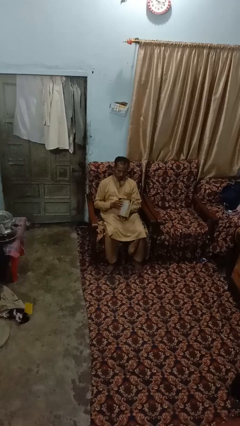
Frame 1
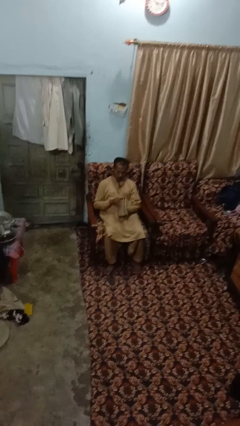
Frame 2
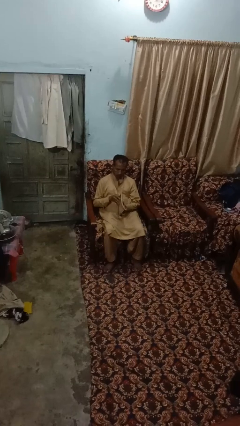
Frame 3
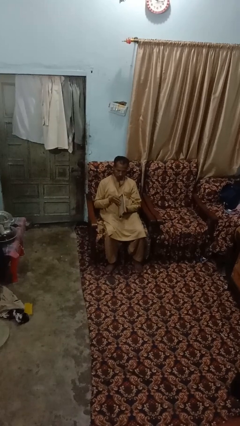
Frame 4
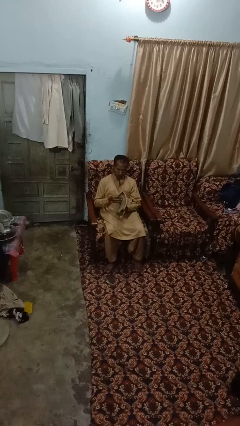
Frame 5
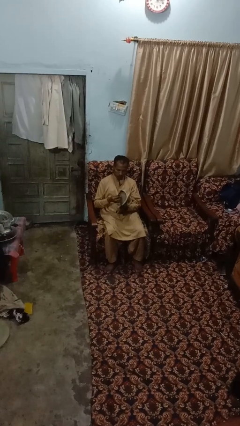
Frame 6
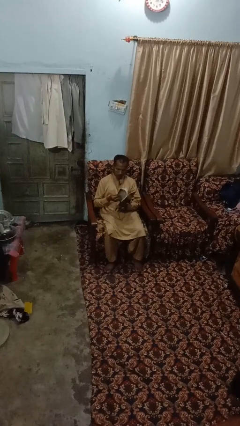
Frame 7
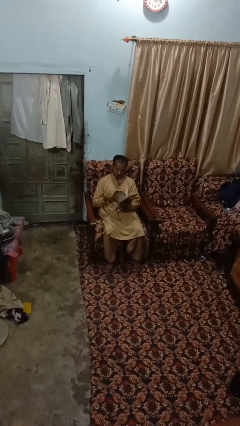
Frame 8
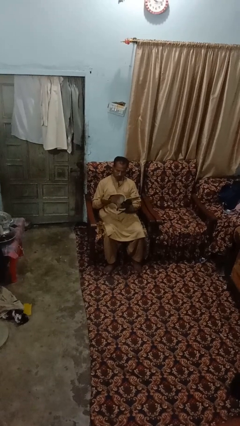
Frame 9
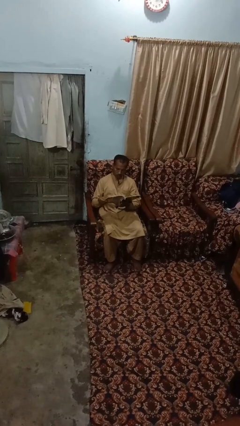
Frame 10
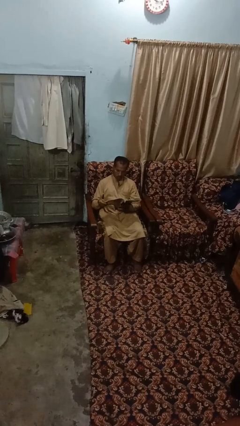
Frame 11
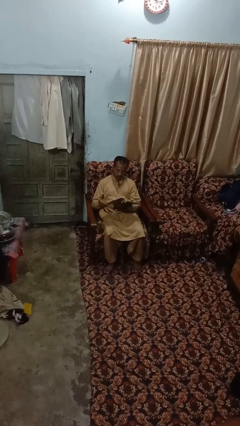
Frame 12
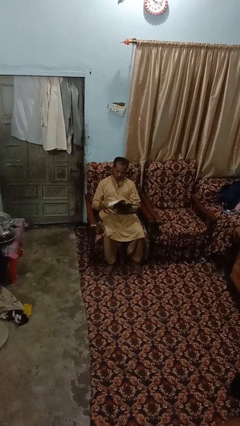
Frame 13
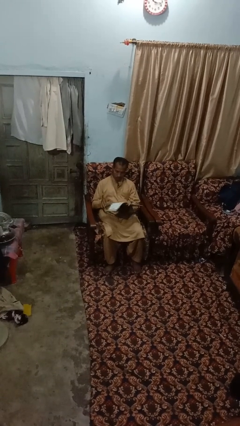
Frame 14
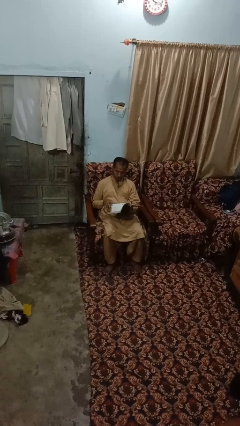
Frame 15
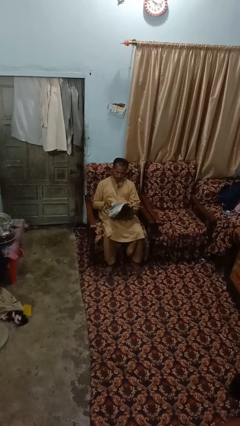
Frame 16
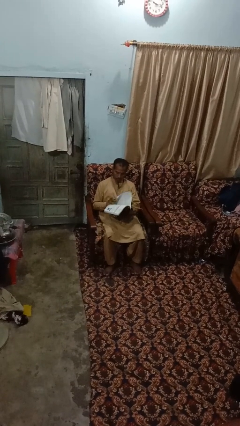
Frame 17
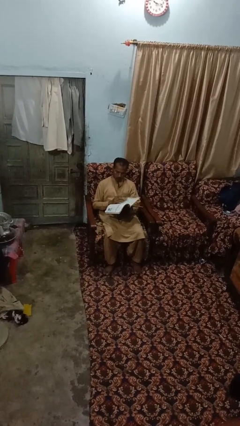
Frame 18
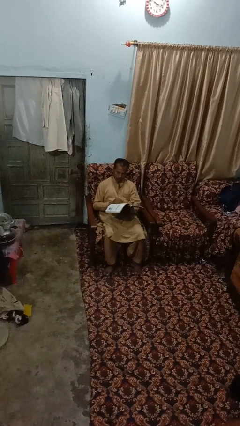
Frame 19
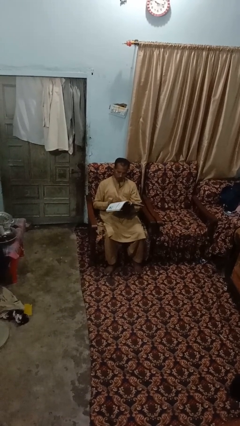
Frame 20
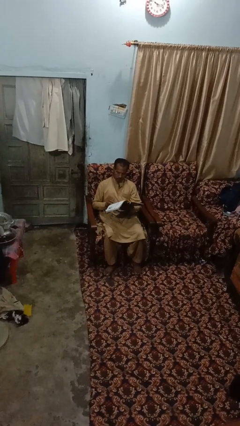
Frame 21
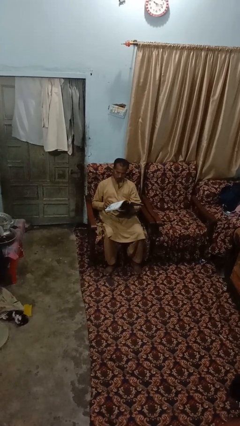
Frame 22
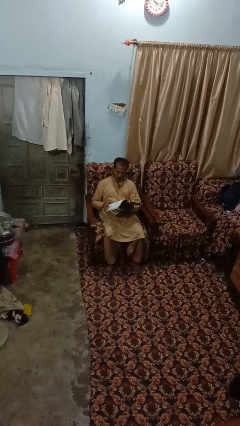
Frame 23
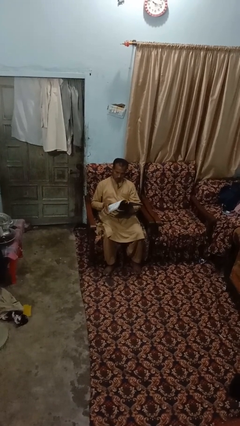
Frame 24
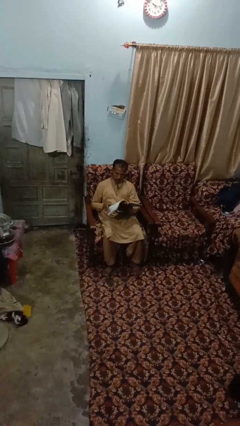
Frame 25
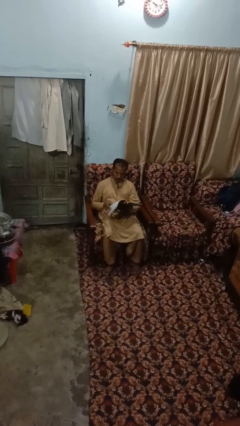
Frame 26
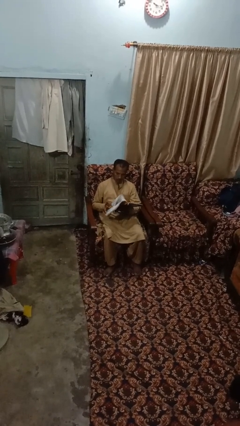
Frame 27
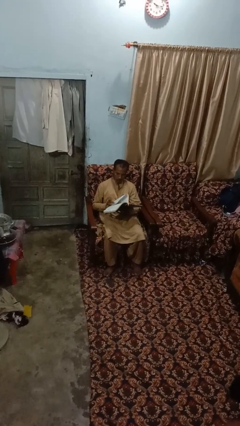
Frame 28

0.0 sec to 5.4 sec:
person reads book

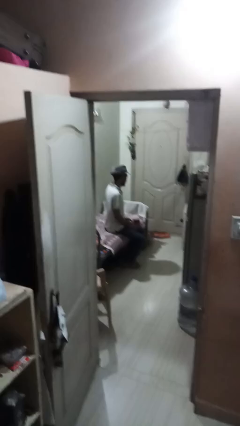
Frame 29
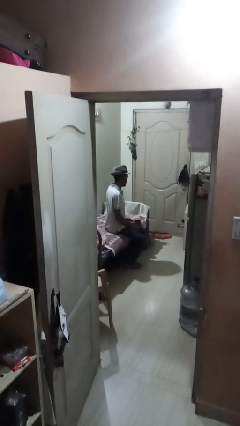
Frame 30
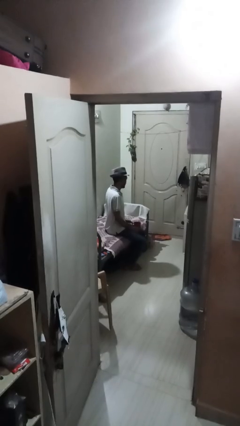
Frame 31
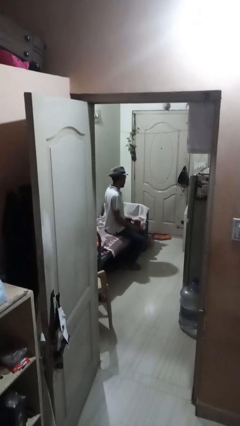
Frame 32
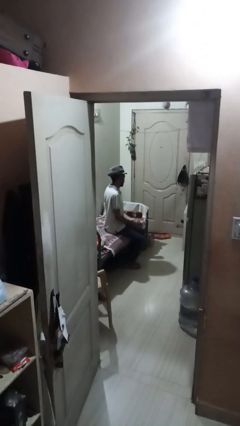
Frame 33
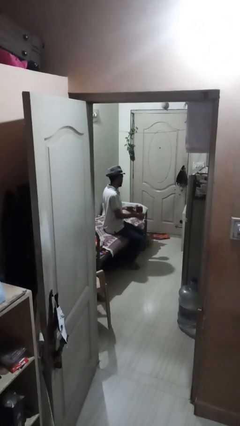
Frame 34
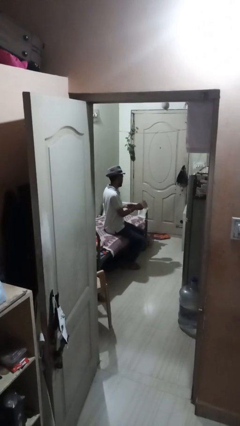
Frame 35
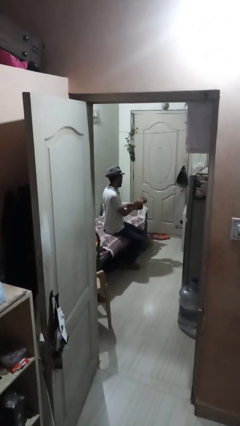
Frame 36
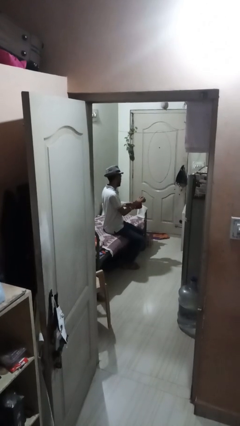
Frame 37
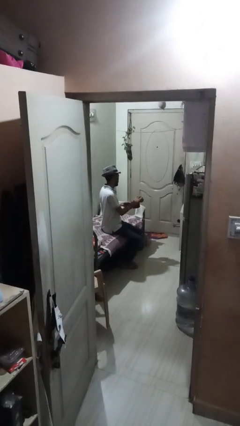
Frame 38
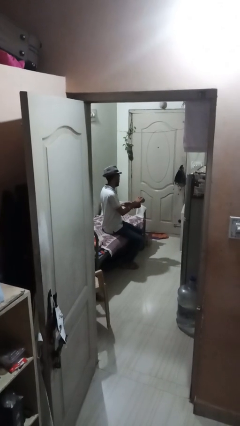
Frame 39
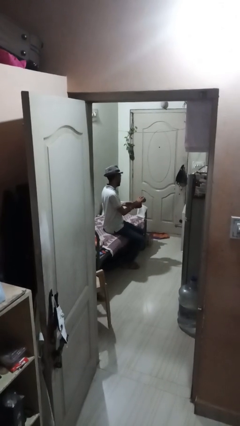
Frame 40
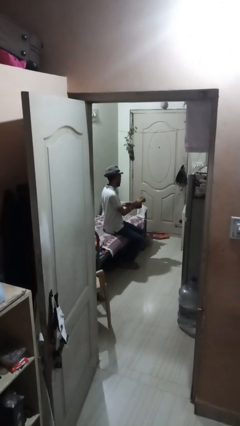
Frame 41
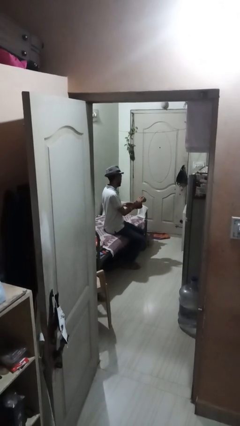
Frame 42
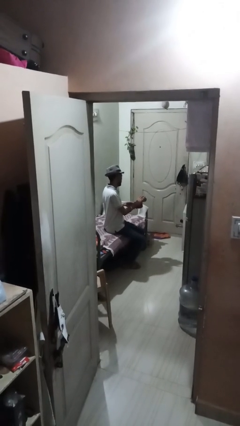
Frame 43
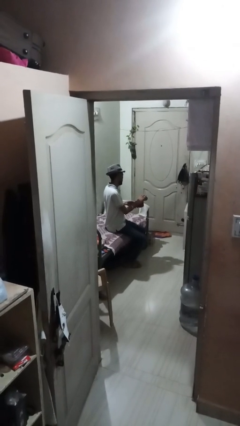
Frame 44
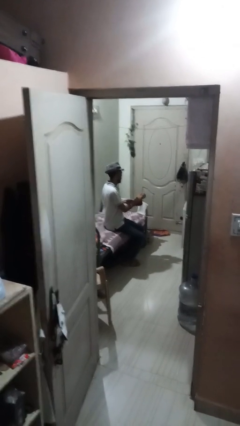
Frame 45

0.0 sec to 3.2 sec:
person pours coffee into mug

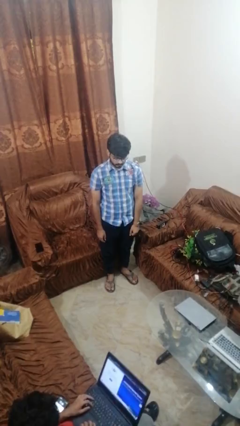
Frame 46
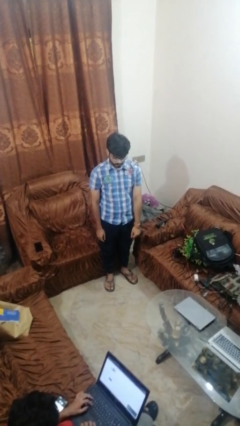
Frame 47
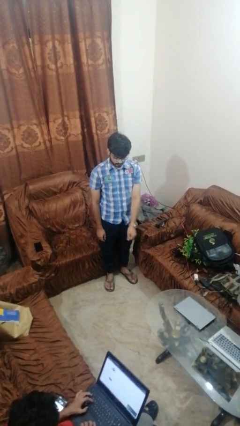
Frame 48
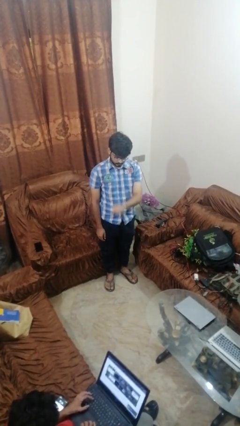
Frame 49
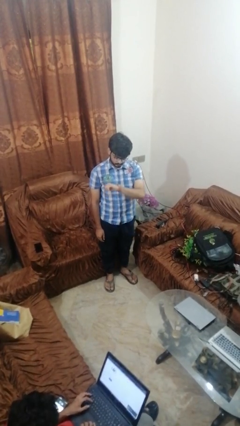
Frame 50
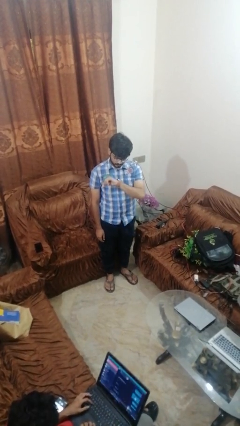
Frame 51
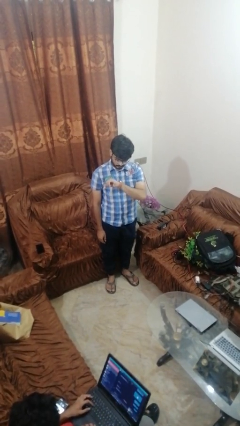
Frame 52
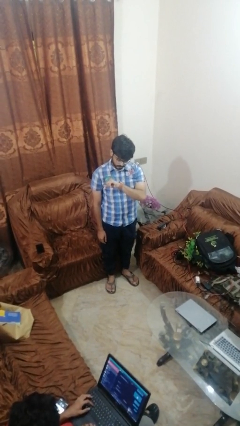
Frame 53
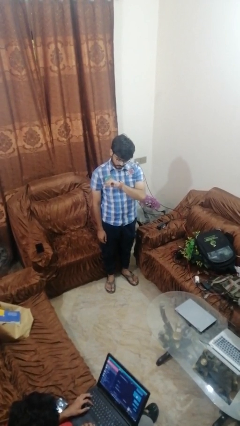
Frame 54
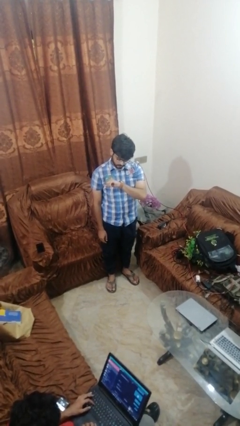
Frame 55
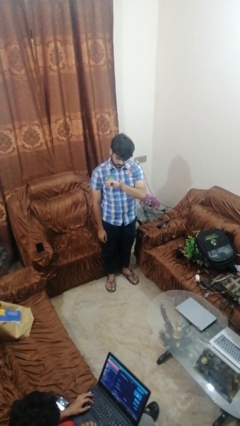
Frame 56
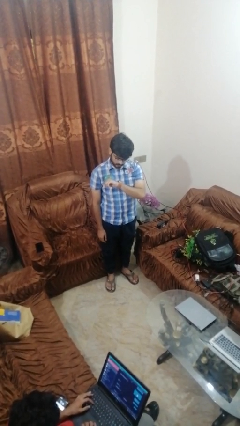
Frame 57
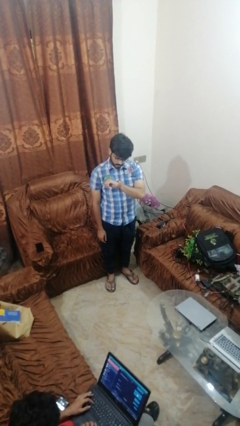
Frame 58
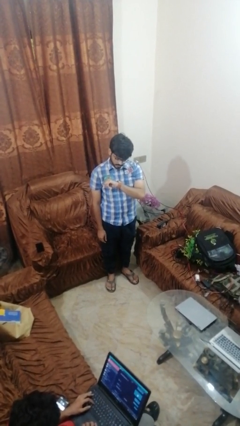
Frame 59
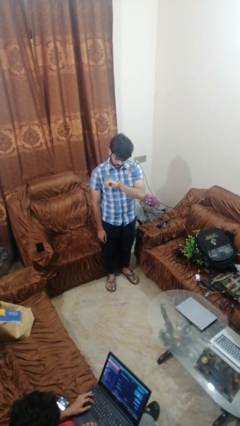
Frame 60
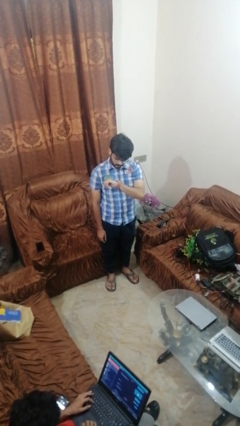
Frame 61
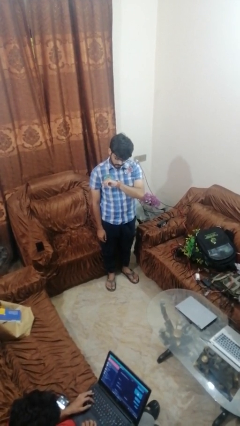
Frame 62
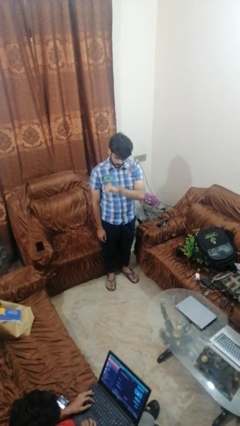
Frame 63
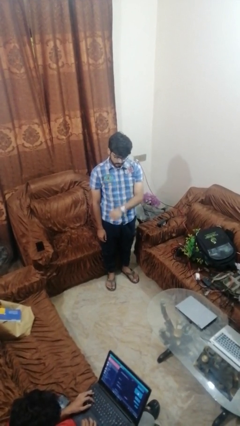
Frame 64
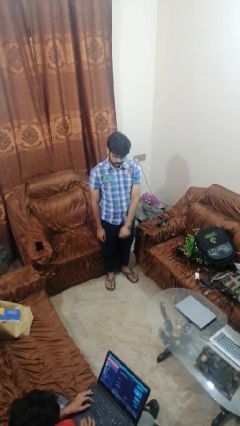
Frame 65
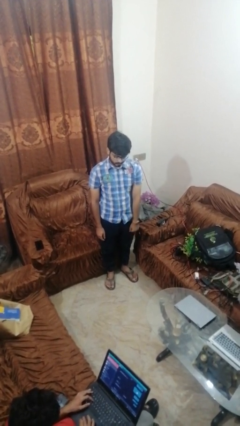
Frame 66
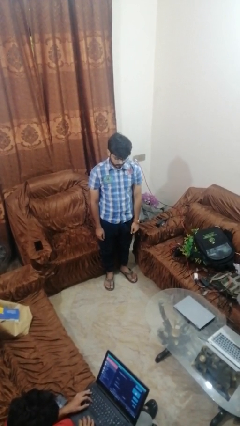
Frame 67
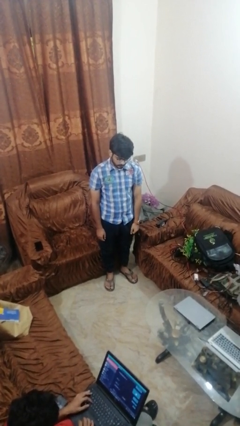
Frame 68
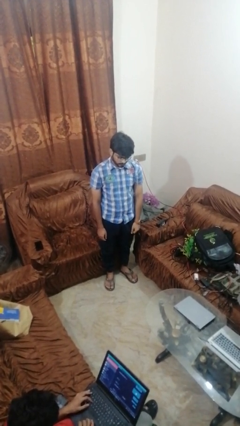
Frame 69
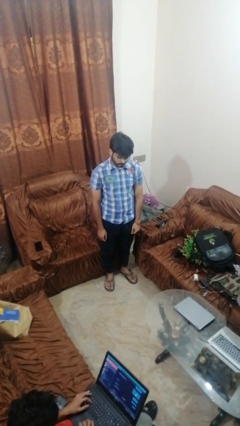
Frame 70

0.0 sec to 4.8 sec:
person looks at wristwatch

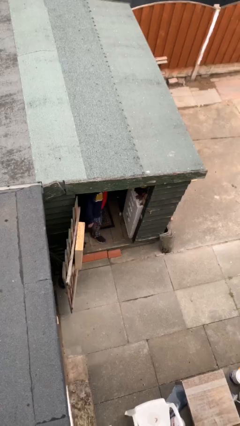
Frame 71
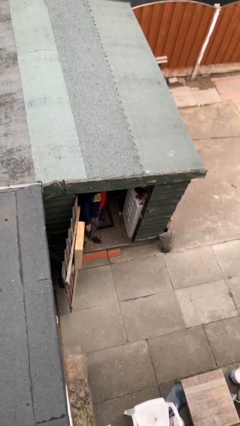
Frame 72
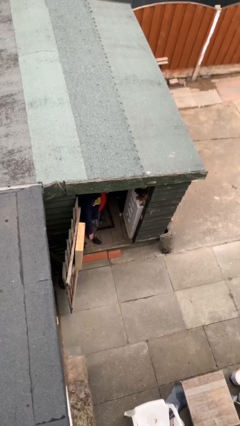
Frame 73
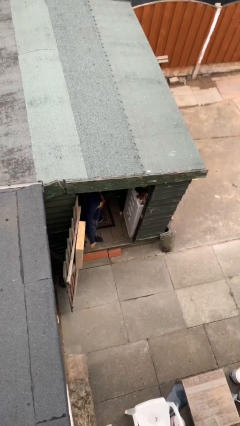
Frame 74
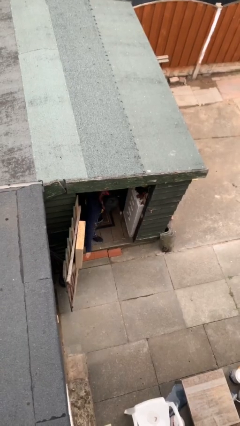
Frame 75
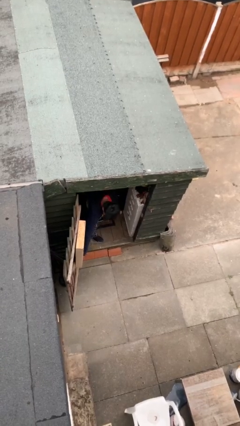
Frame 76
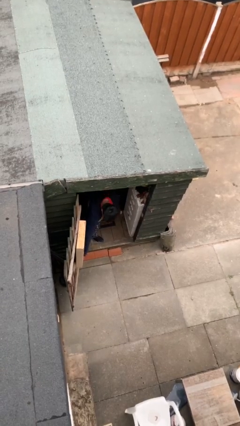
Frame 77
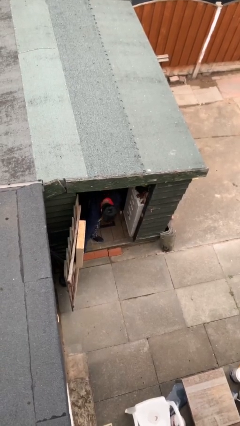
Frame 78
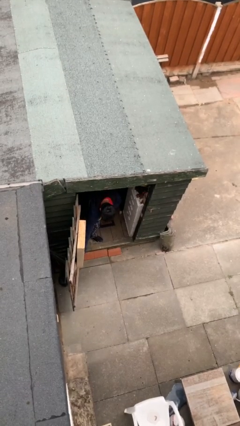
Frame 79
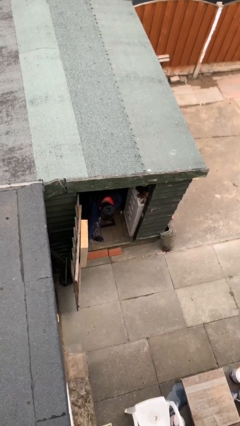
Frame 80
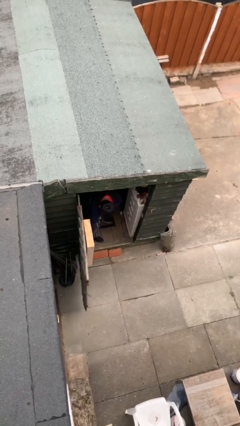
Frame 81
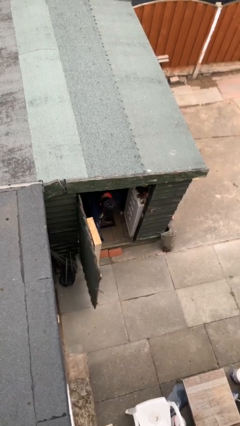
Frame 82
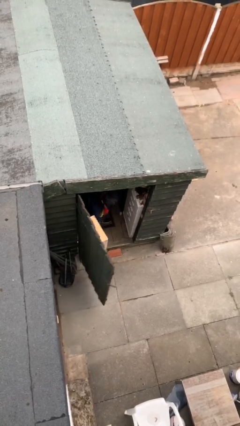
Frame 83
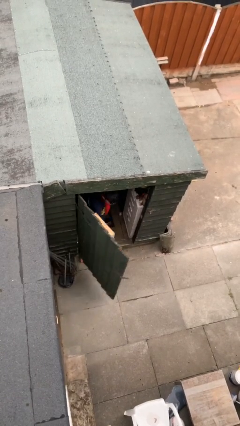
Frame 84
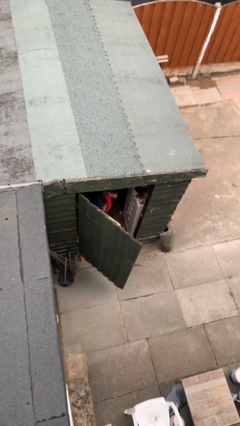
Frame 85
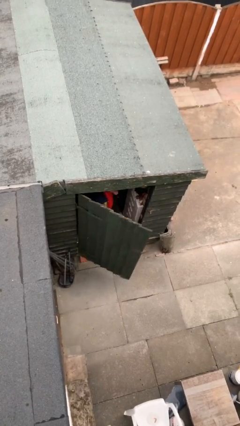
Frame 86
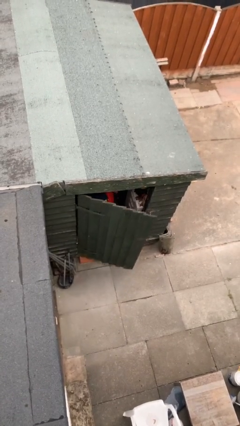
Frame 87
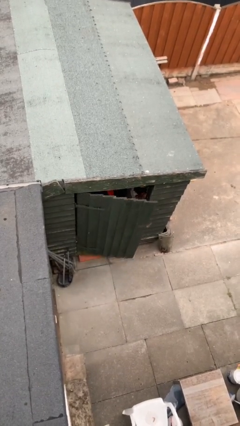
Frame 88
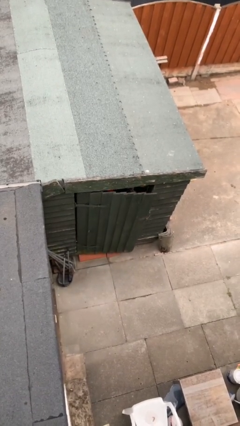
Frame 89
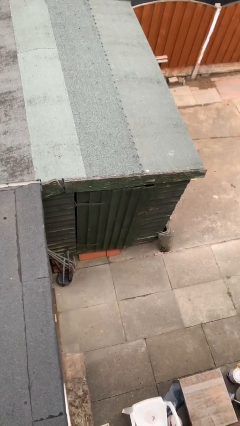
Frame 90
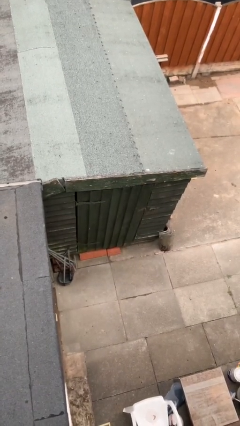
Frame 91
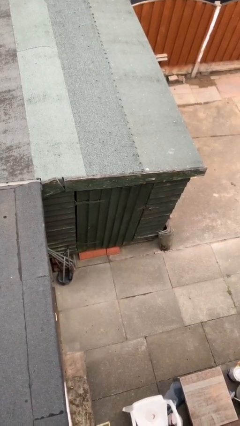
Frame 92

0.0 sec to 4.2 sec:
person closes facility door
